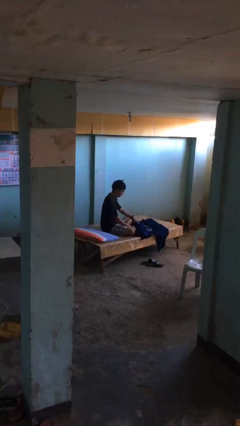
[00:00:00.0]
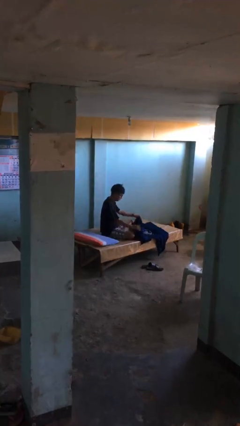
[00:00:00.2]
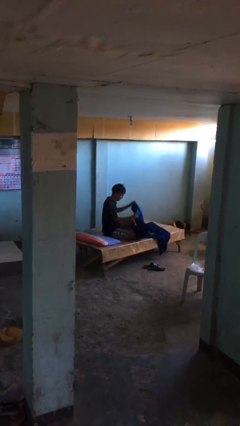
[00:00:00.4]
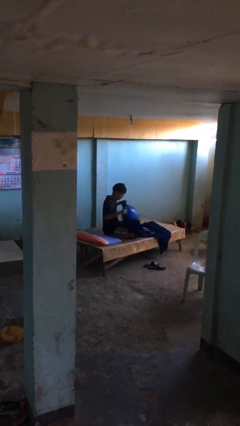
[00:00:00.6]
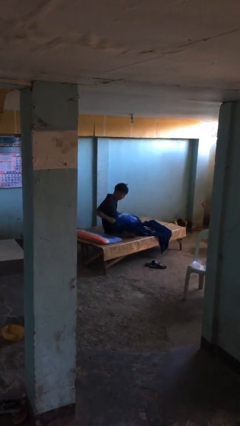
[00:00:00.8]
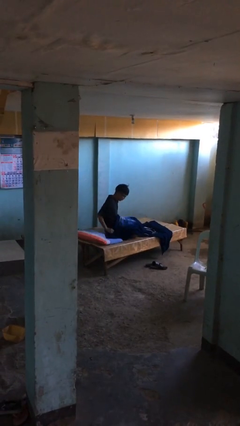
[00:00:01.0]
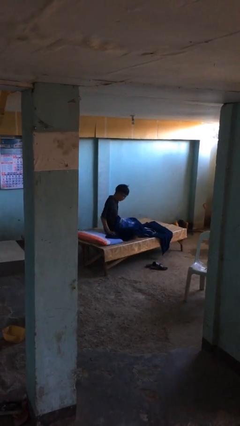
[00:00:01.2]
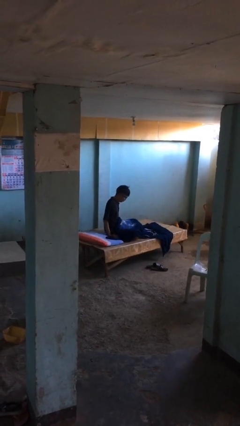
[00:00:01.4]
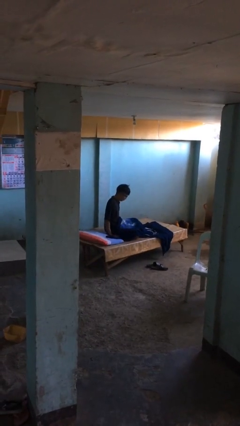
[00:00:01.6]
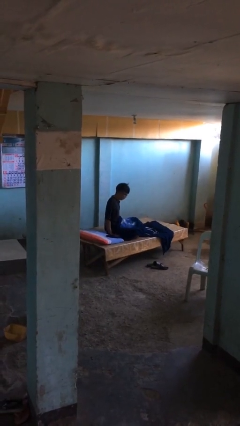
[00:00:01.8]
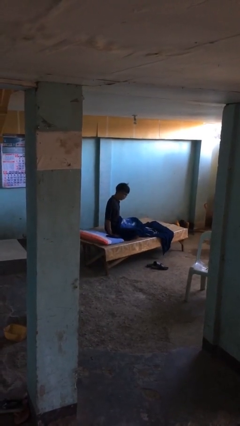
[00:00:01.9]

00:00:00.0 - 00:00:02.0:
person covers with blanket

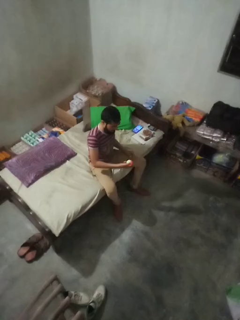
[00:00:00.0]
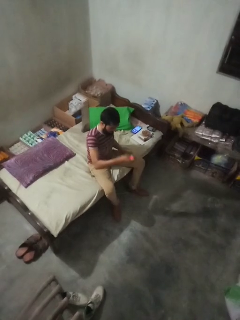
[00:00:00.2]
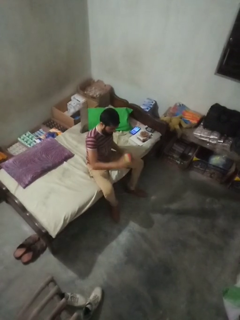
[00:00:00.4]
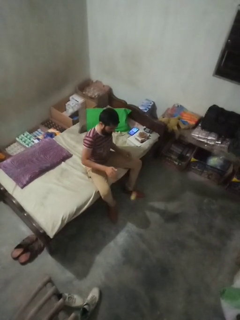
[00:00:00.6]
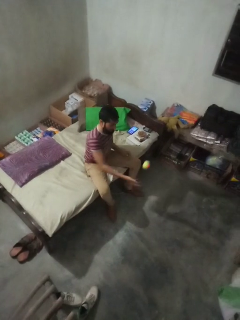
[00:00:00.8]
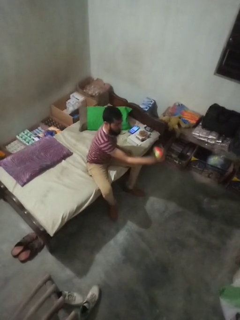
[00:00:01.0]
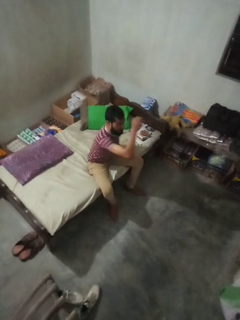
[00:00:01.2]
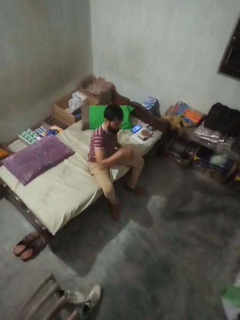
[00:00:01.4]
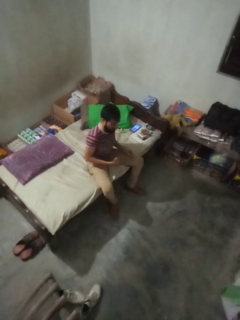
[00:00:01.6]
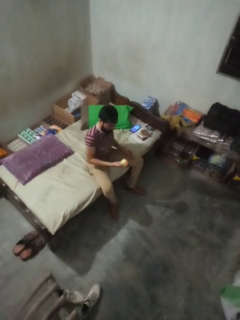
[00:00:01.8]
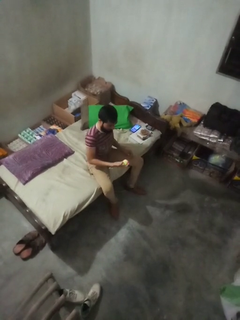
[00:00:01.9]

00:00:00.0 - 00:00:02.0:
person bounces ball on floor

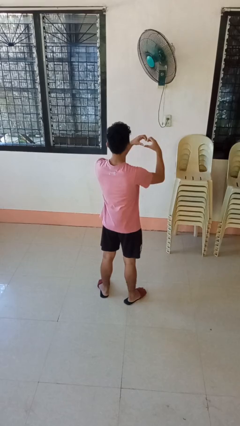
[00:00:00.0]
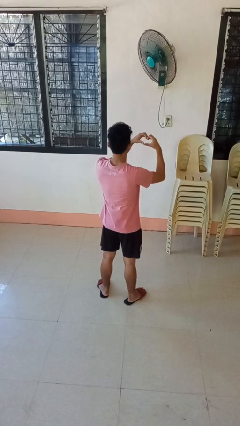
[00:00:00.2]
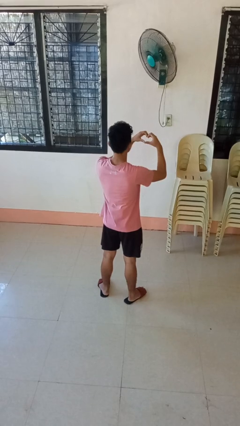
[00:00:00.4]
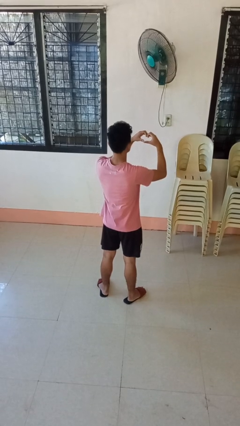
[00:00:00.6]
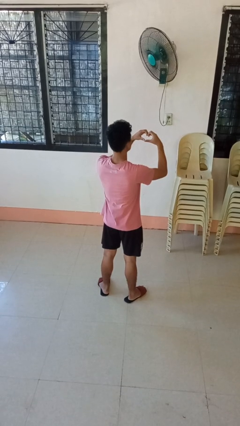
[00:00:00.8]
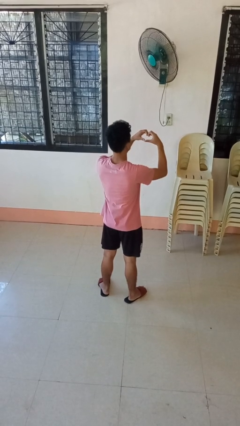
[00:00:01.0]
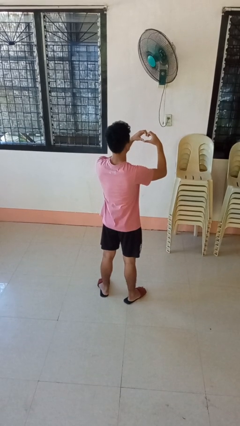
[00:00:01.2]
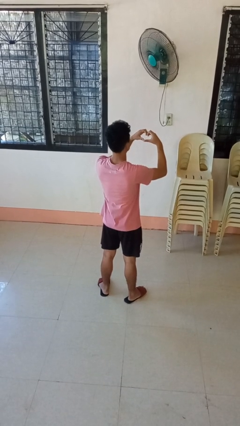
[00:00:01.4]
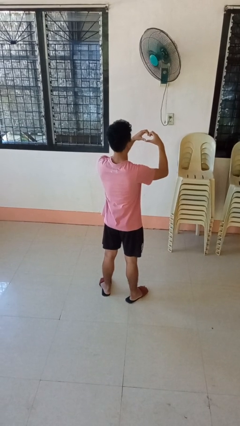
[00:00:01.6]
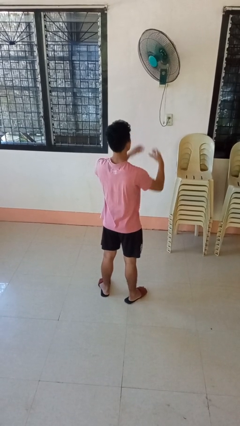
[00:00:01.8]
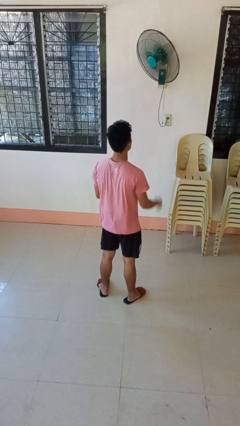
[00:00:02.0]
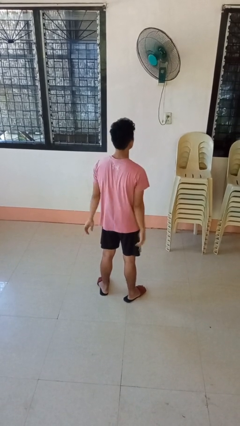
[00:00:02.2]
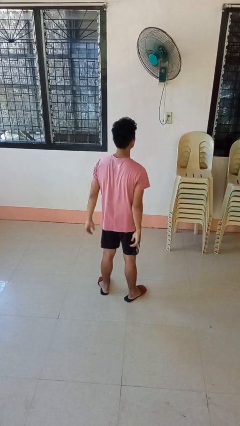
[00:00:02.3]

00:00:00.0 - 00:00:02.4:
person gestures heart

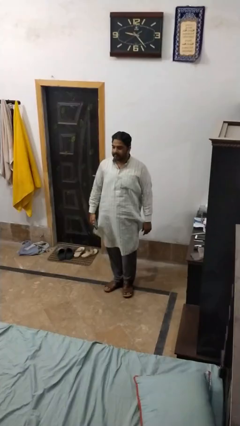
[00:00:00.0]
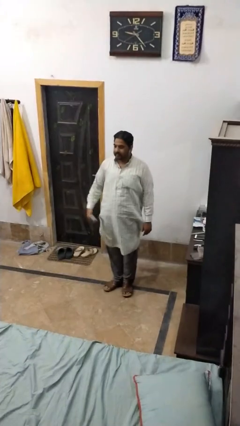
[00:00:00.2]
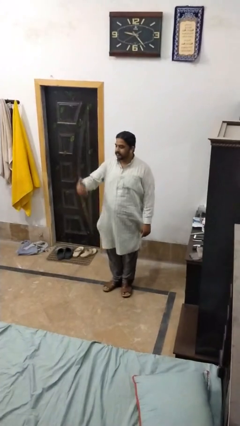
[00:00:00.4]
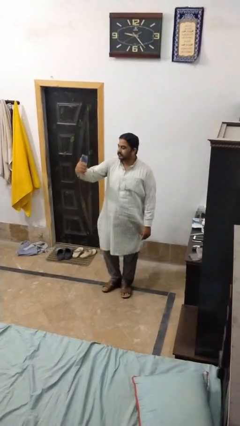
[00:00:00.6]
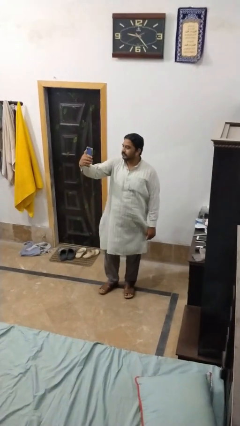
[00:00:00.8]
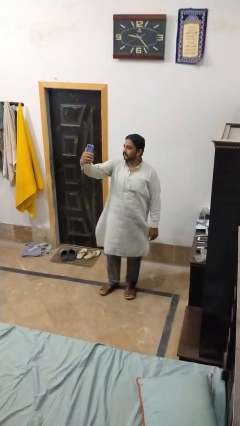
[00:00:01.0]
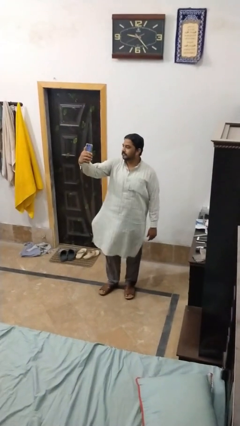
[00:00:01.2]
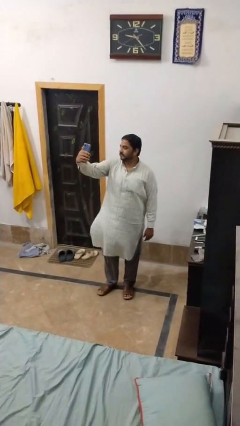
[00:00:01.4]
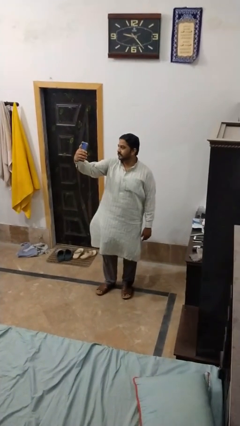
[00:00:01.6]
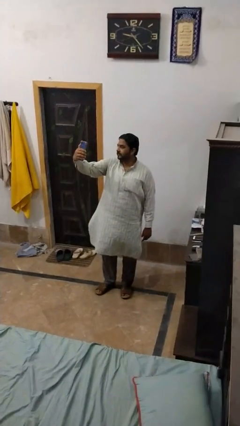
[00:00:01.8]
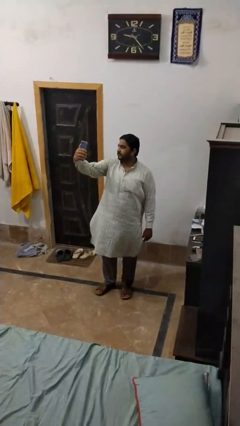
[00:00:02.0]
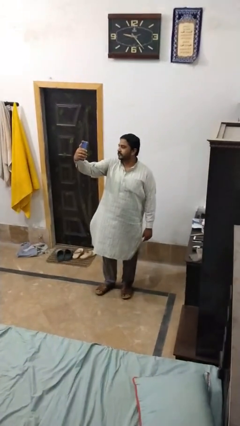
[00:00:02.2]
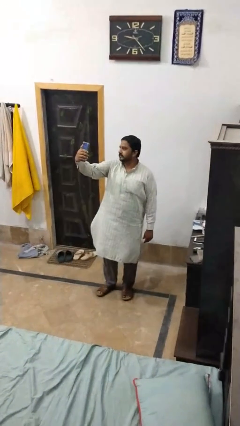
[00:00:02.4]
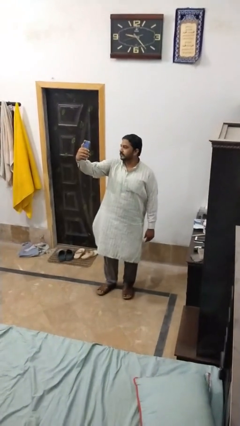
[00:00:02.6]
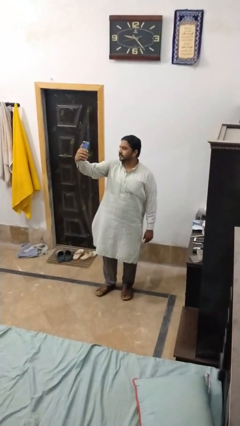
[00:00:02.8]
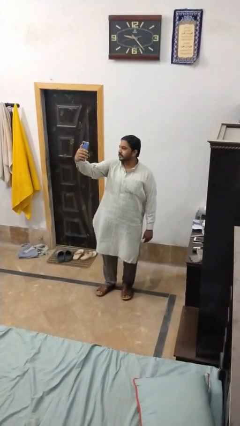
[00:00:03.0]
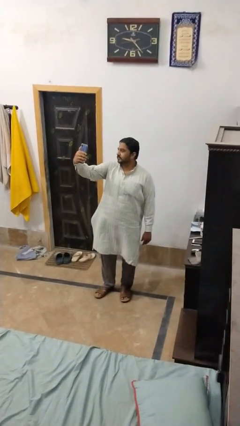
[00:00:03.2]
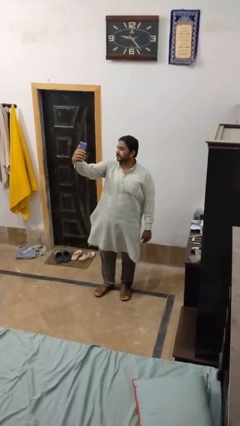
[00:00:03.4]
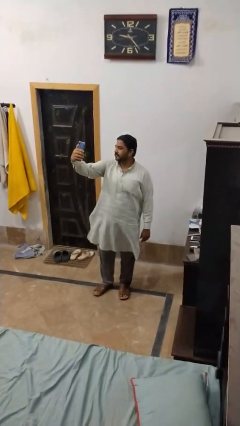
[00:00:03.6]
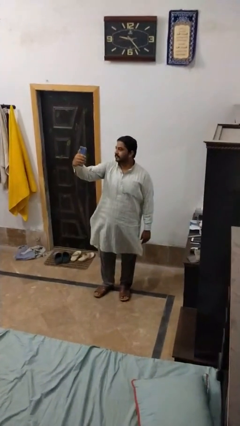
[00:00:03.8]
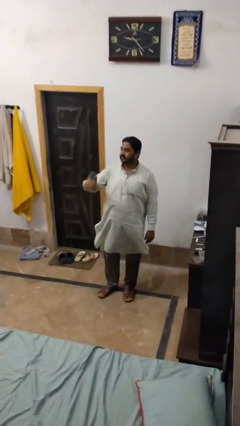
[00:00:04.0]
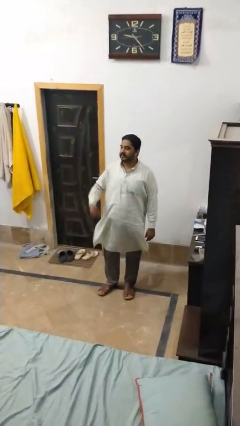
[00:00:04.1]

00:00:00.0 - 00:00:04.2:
person takes selfie

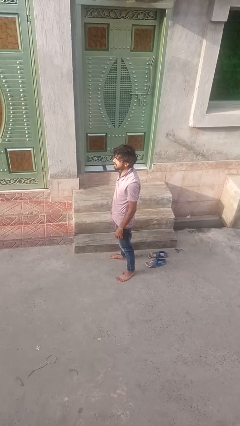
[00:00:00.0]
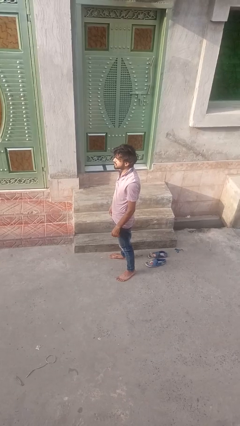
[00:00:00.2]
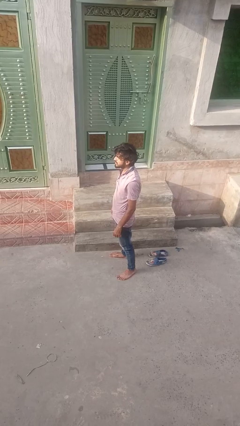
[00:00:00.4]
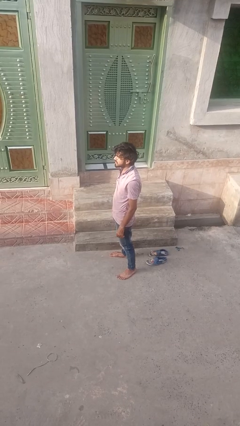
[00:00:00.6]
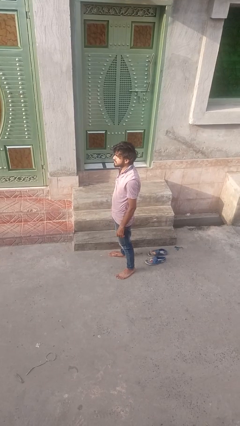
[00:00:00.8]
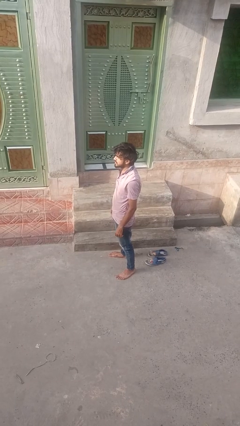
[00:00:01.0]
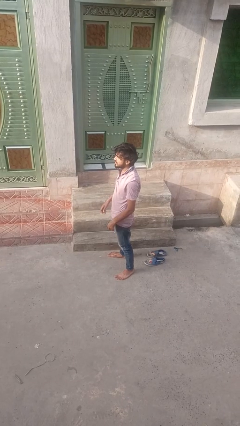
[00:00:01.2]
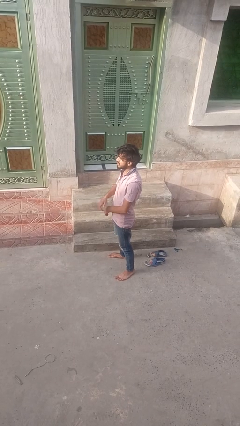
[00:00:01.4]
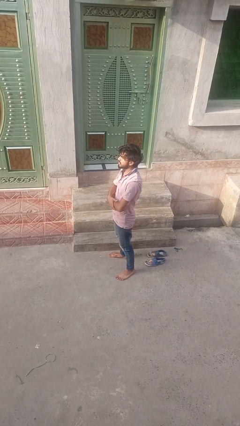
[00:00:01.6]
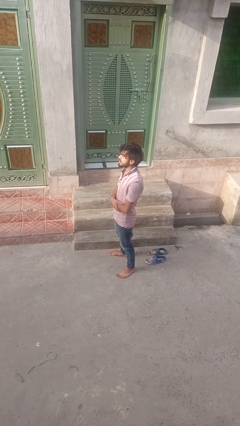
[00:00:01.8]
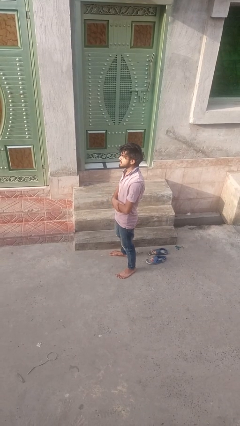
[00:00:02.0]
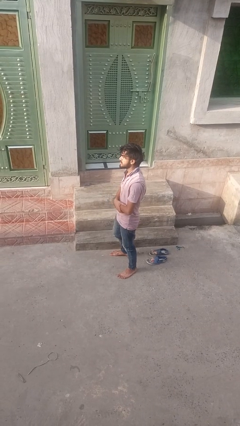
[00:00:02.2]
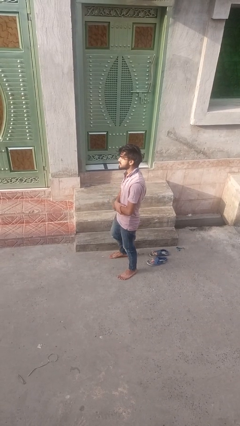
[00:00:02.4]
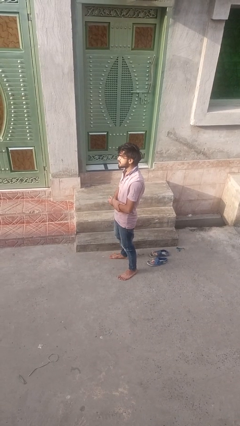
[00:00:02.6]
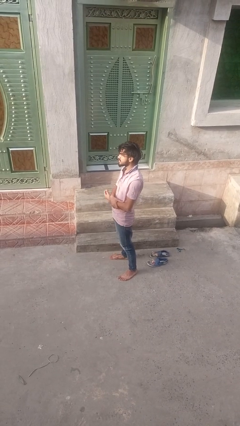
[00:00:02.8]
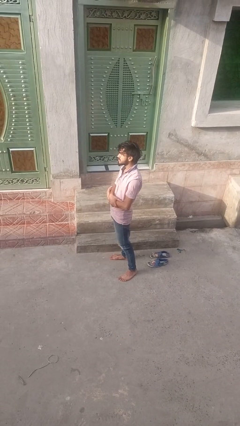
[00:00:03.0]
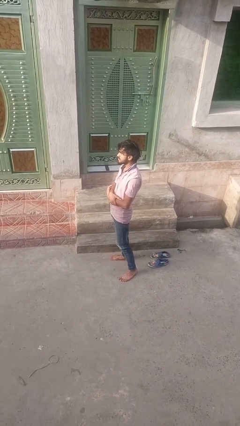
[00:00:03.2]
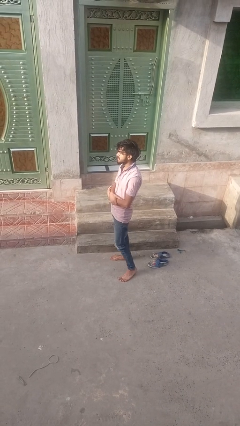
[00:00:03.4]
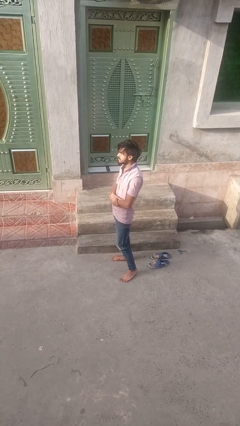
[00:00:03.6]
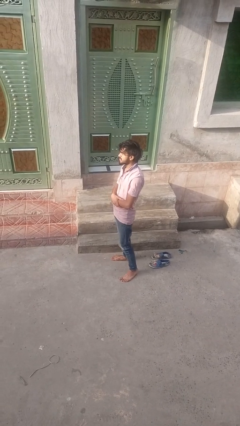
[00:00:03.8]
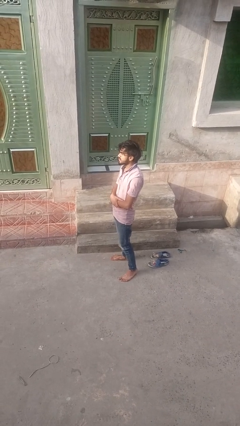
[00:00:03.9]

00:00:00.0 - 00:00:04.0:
person crosses arms

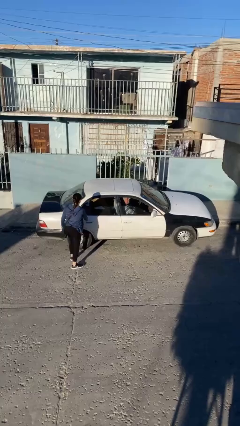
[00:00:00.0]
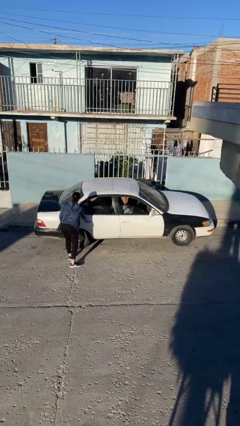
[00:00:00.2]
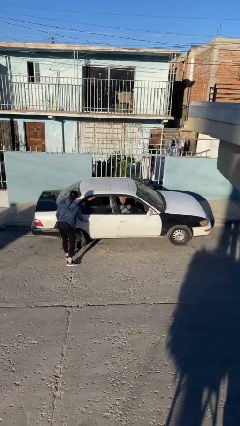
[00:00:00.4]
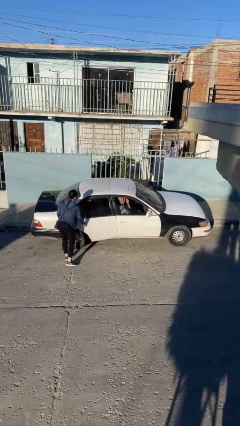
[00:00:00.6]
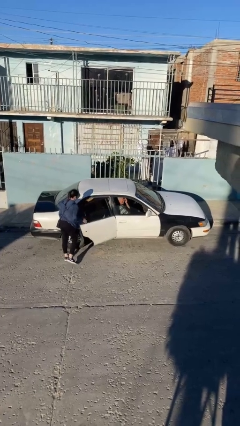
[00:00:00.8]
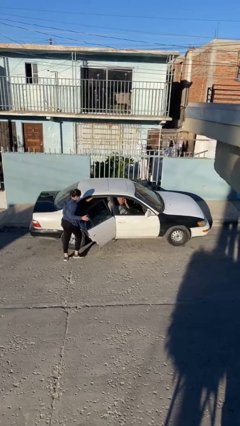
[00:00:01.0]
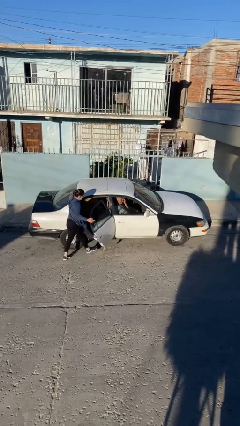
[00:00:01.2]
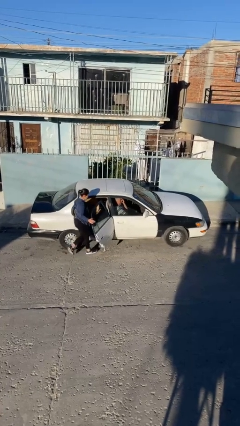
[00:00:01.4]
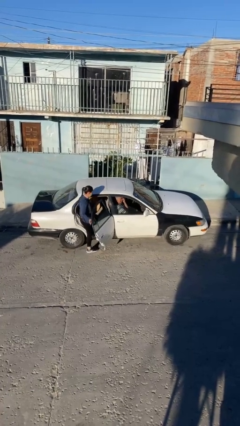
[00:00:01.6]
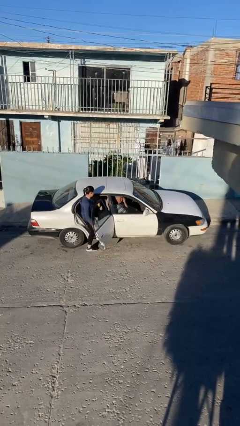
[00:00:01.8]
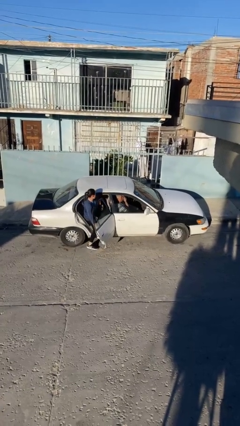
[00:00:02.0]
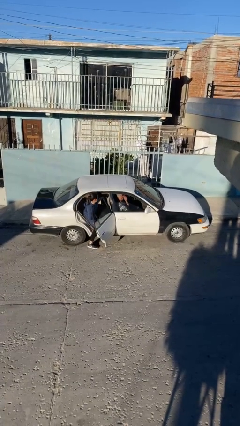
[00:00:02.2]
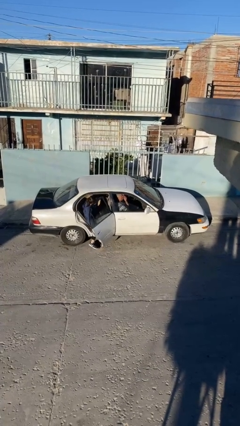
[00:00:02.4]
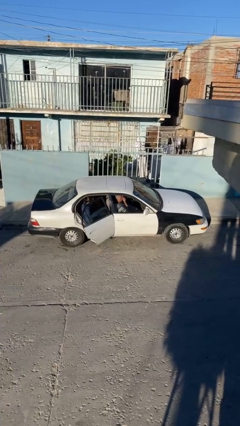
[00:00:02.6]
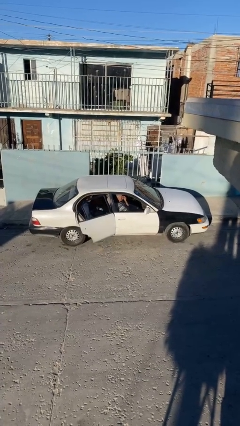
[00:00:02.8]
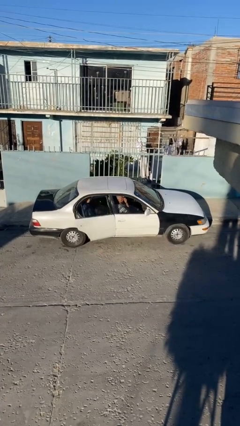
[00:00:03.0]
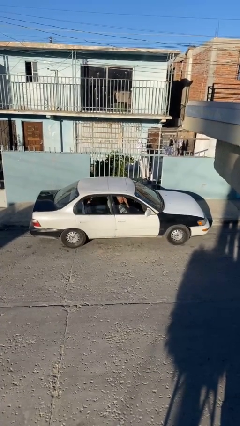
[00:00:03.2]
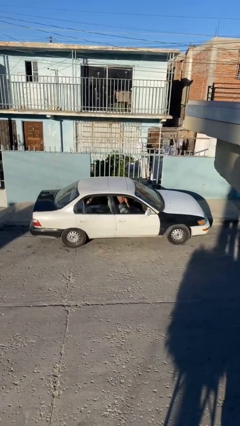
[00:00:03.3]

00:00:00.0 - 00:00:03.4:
car picks up person
